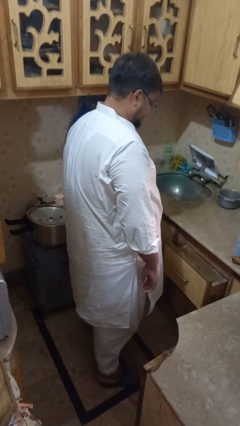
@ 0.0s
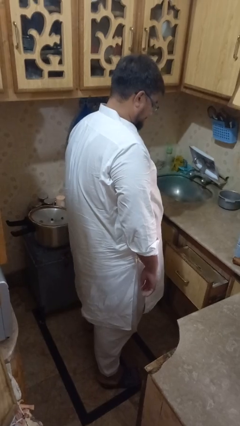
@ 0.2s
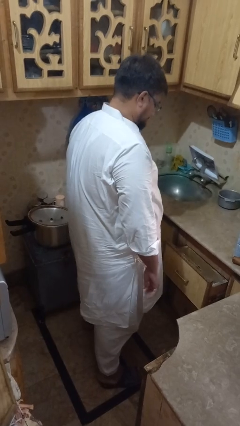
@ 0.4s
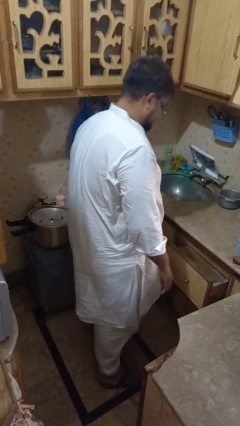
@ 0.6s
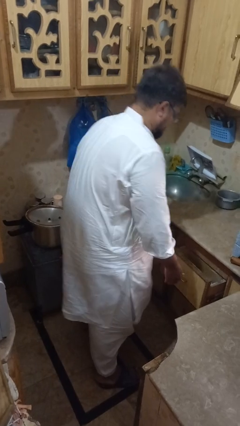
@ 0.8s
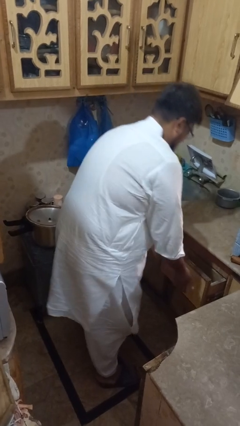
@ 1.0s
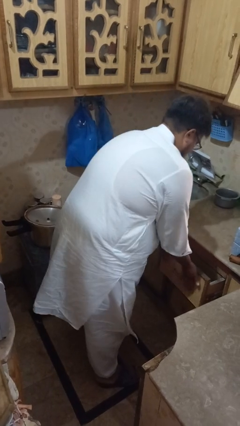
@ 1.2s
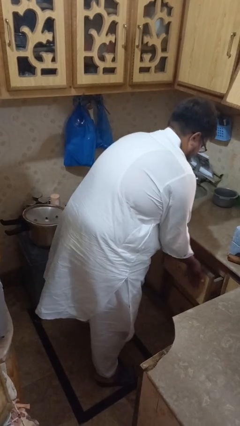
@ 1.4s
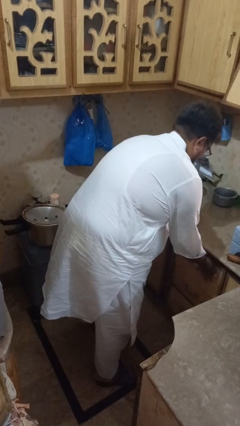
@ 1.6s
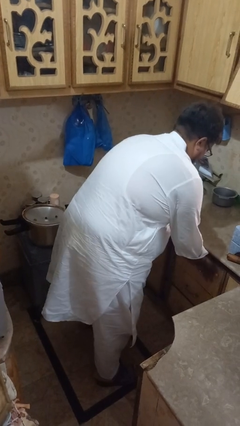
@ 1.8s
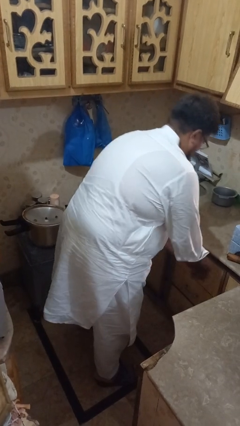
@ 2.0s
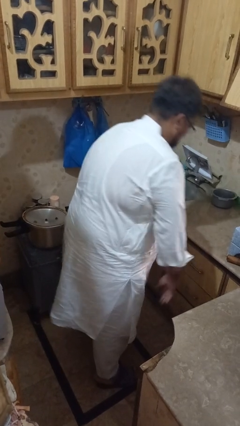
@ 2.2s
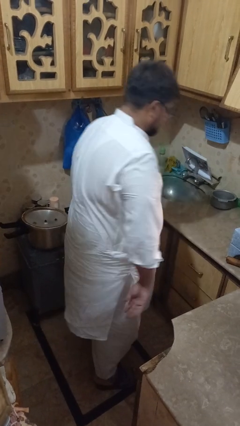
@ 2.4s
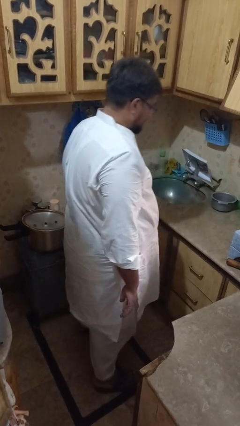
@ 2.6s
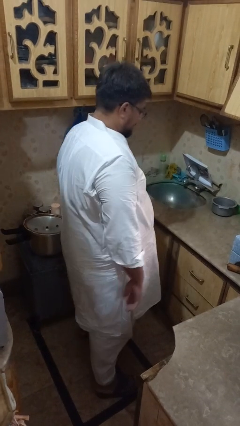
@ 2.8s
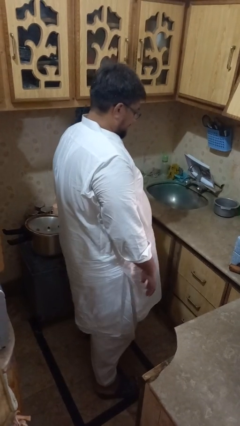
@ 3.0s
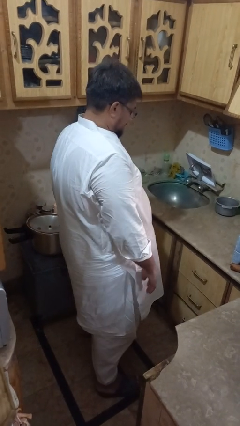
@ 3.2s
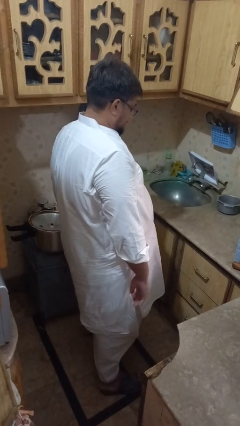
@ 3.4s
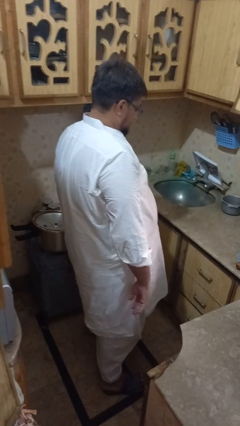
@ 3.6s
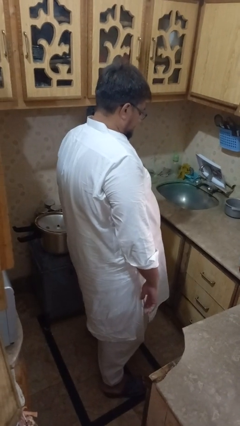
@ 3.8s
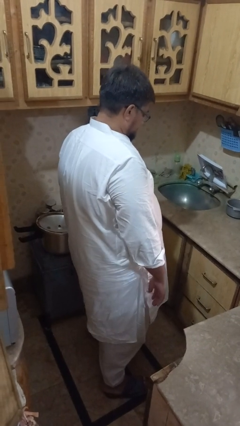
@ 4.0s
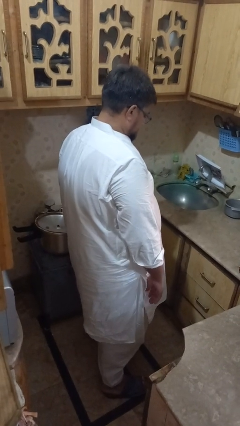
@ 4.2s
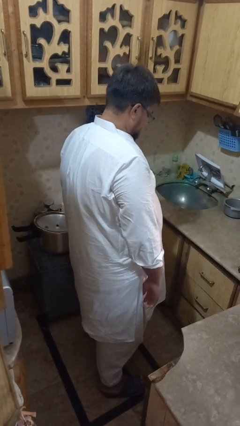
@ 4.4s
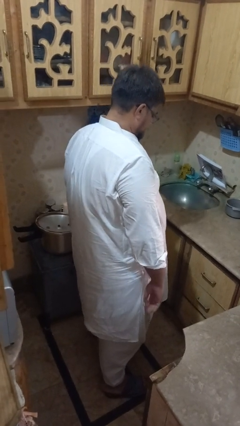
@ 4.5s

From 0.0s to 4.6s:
person closes kitchen drawer

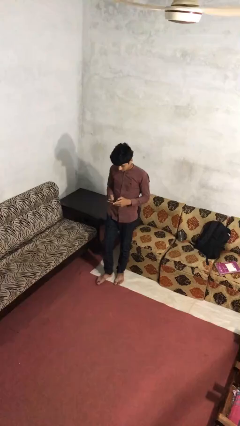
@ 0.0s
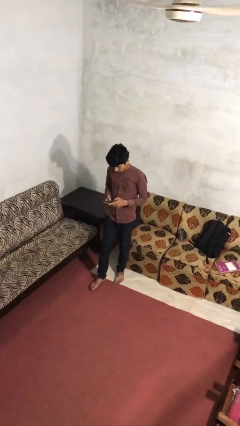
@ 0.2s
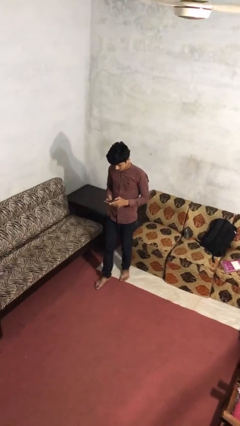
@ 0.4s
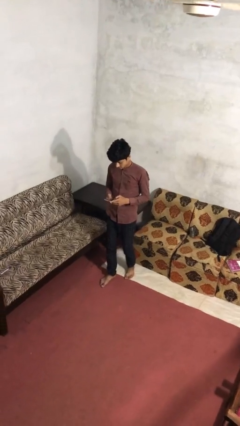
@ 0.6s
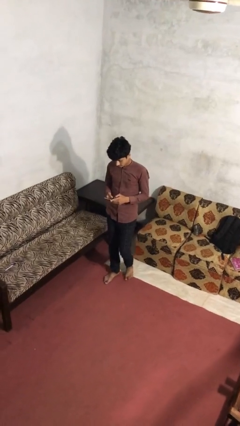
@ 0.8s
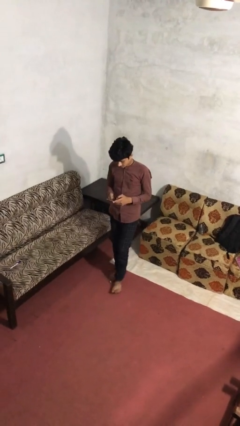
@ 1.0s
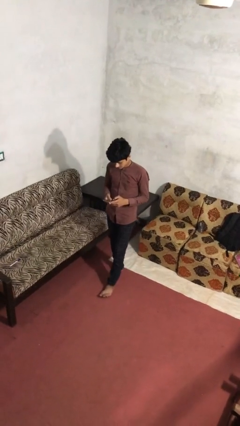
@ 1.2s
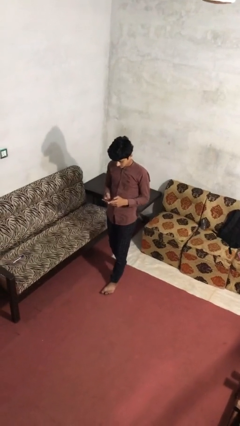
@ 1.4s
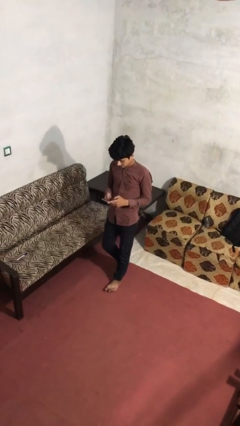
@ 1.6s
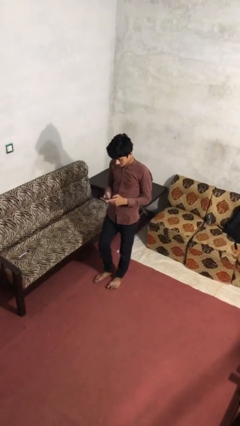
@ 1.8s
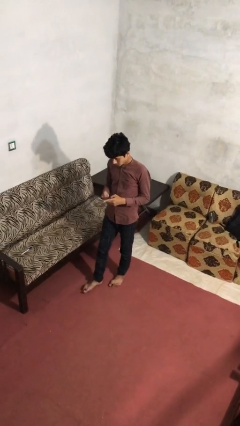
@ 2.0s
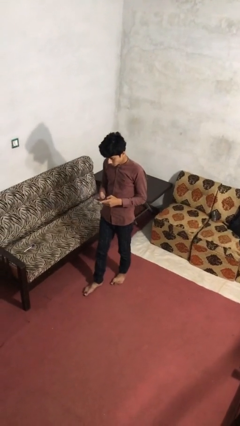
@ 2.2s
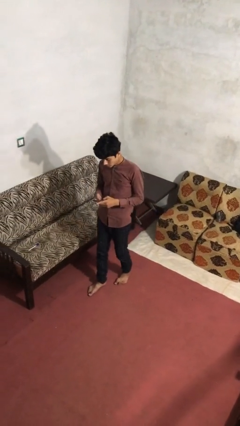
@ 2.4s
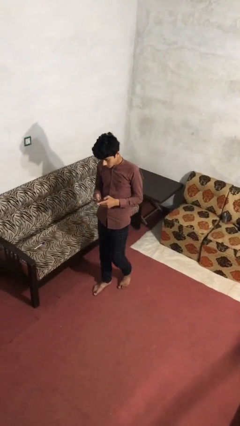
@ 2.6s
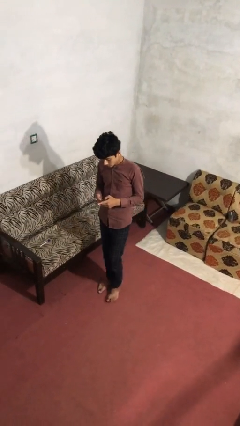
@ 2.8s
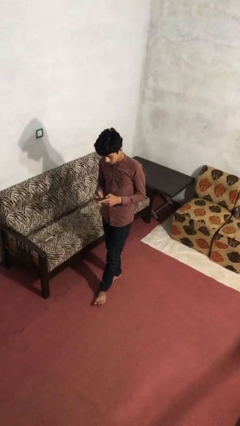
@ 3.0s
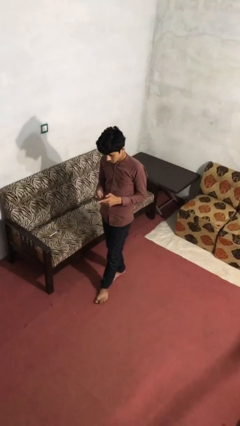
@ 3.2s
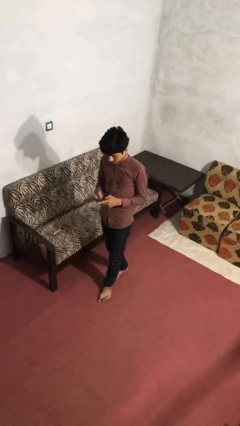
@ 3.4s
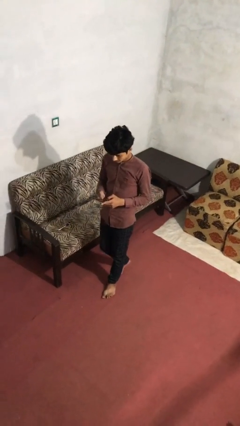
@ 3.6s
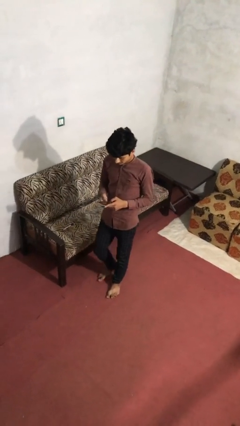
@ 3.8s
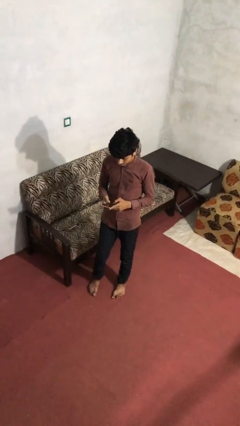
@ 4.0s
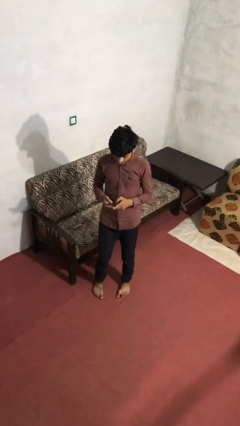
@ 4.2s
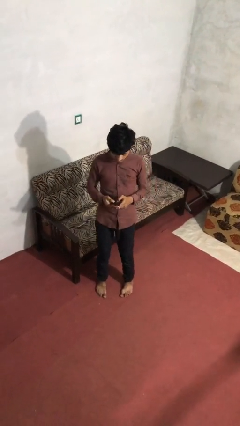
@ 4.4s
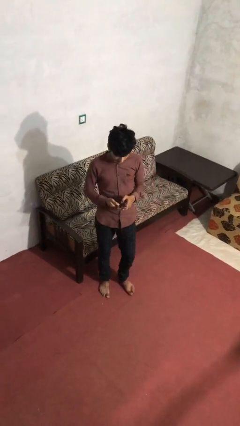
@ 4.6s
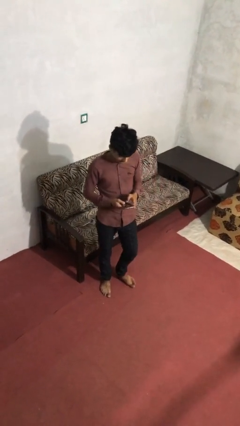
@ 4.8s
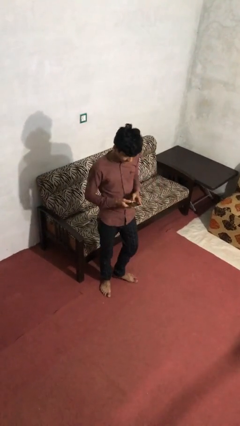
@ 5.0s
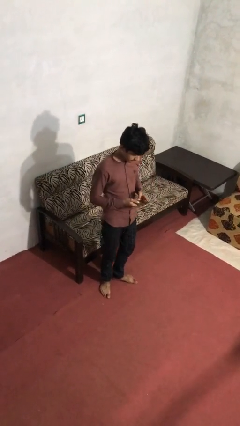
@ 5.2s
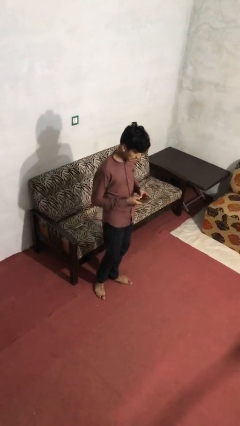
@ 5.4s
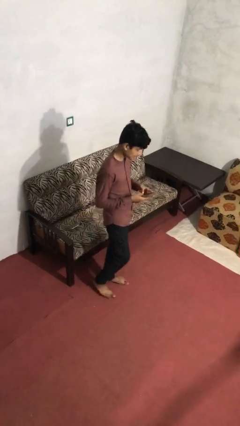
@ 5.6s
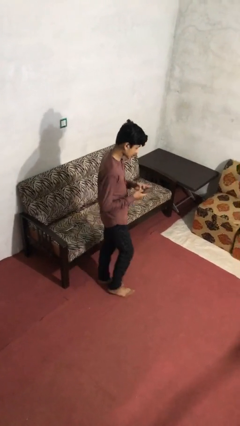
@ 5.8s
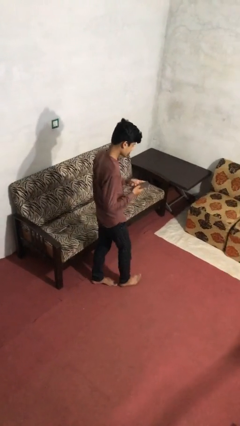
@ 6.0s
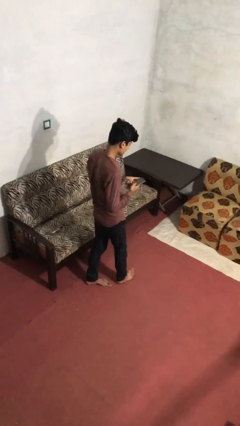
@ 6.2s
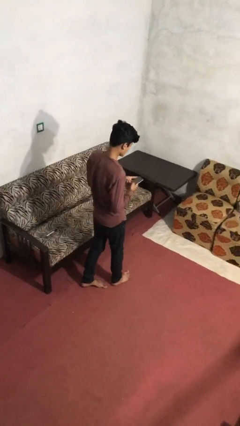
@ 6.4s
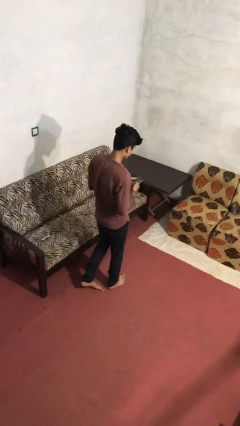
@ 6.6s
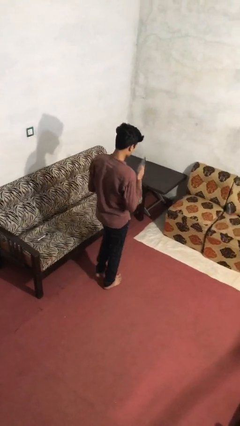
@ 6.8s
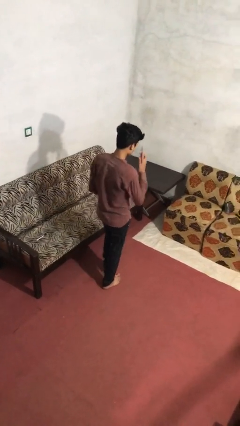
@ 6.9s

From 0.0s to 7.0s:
person texts on phone

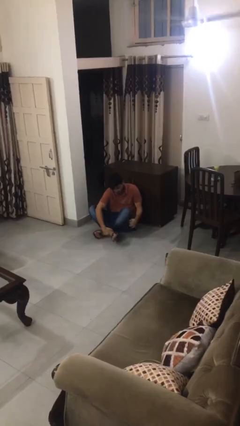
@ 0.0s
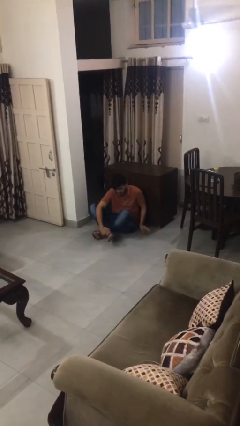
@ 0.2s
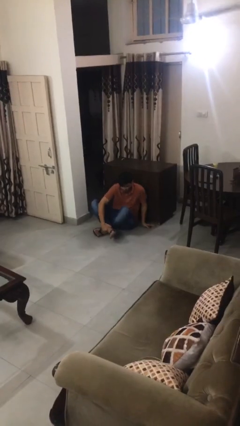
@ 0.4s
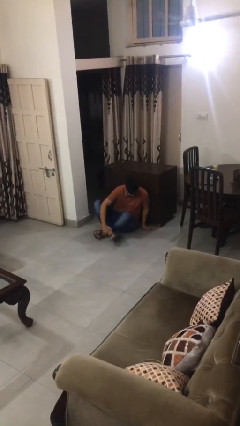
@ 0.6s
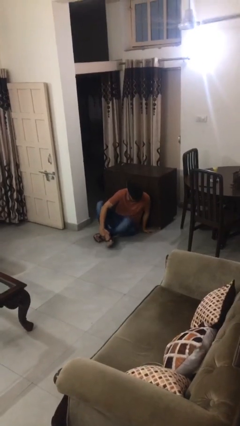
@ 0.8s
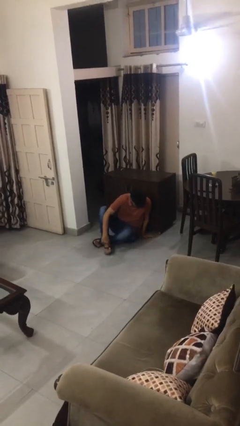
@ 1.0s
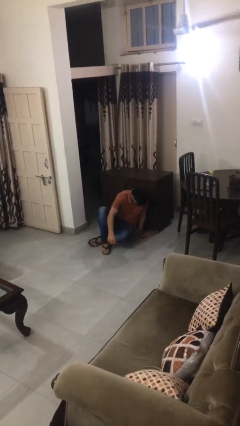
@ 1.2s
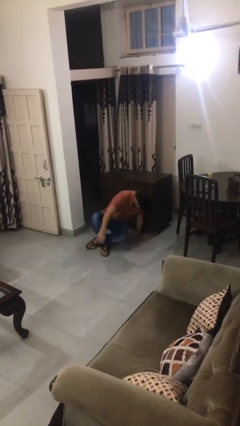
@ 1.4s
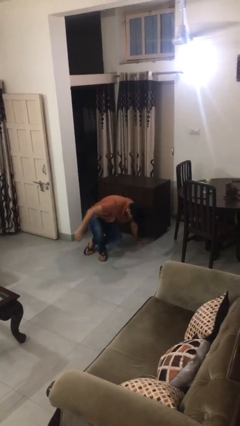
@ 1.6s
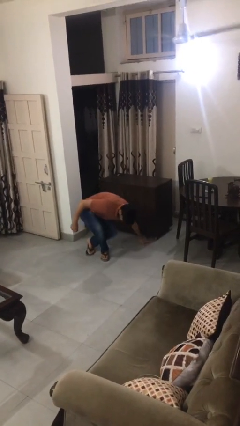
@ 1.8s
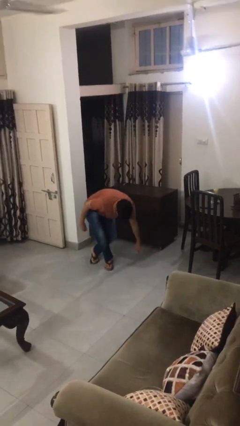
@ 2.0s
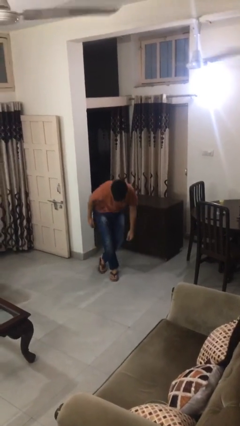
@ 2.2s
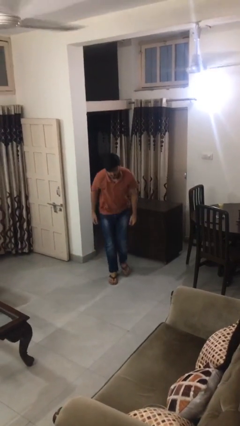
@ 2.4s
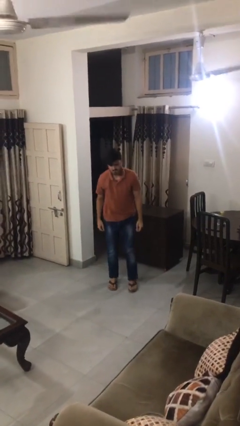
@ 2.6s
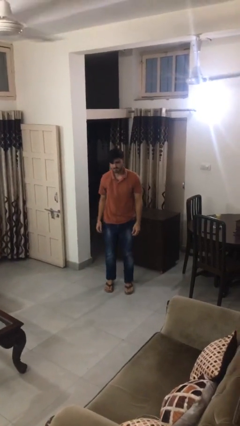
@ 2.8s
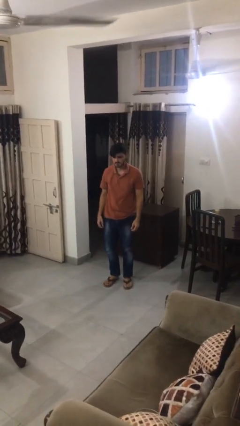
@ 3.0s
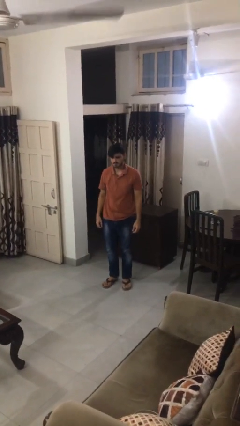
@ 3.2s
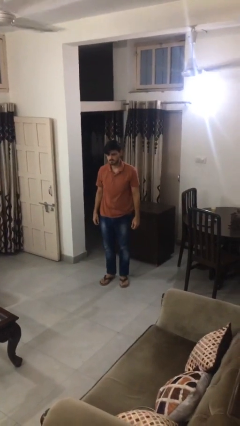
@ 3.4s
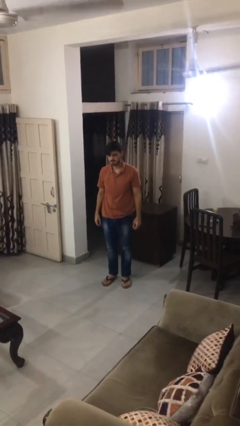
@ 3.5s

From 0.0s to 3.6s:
person stands up from floor

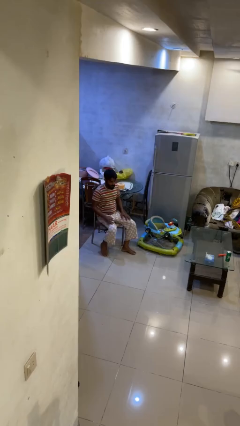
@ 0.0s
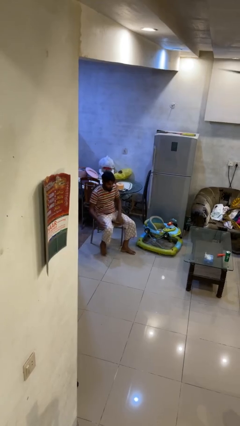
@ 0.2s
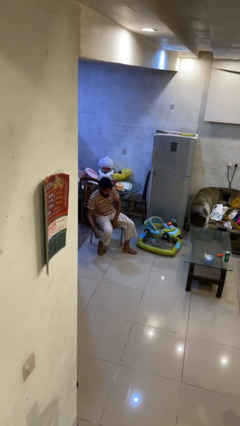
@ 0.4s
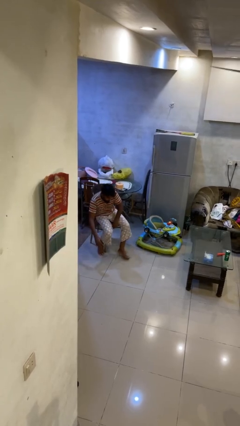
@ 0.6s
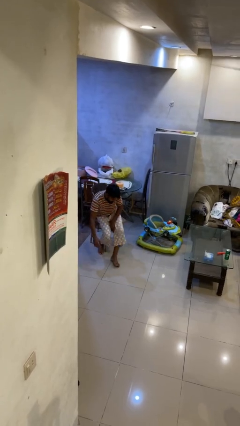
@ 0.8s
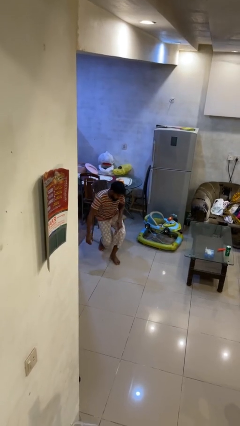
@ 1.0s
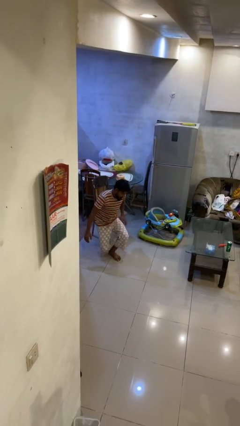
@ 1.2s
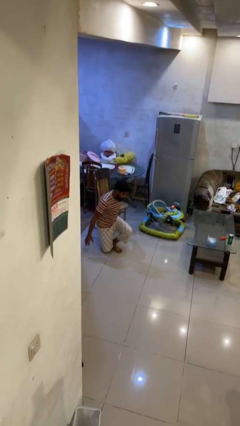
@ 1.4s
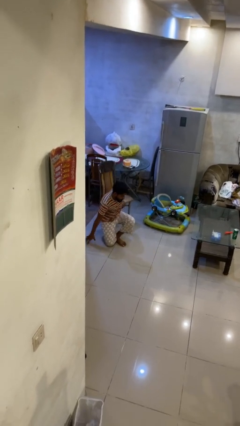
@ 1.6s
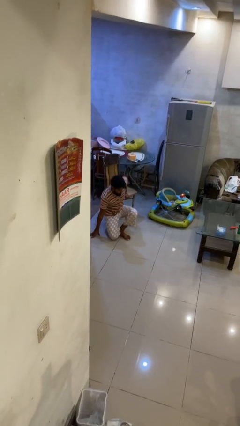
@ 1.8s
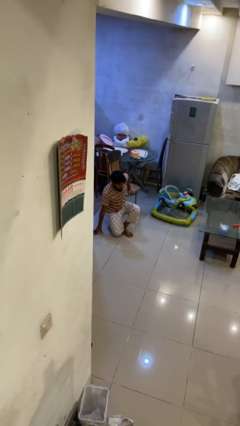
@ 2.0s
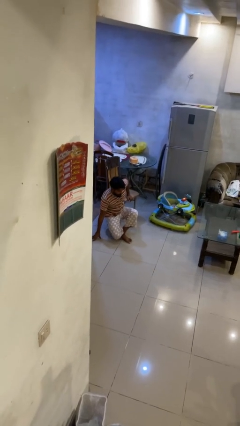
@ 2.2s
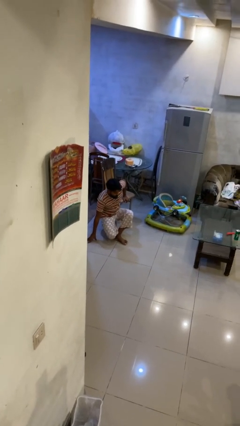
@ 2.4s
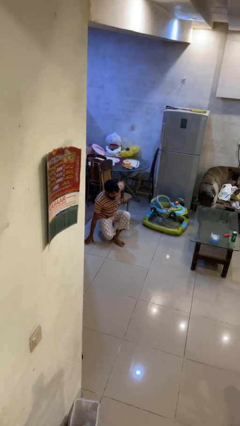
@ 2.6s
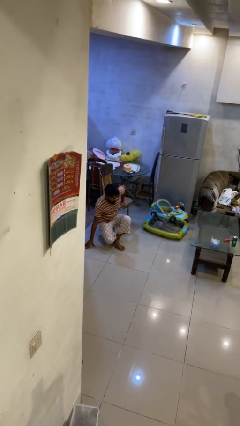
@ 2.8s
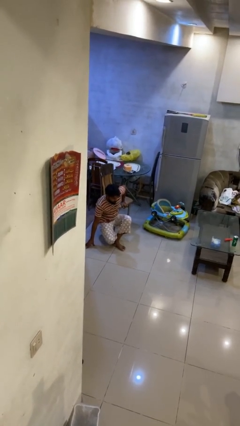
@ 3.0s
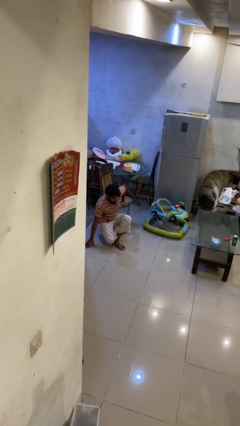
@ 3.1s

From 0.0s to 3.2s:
person falls from chair
